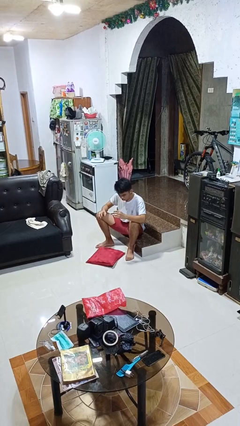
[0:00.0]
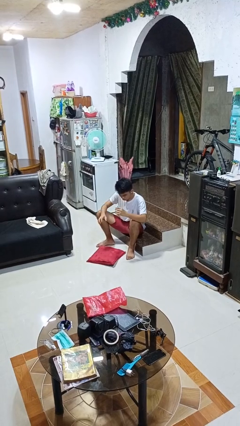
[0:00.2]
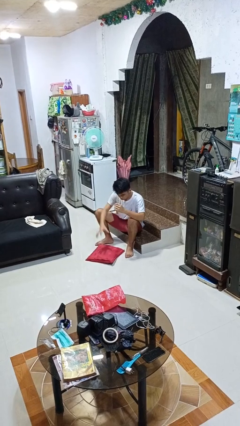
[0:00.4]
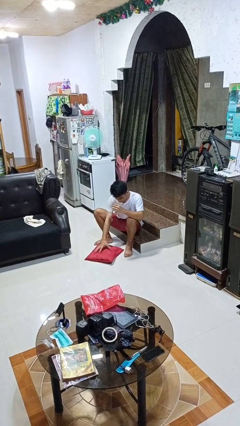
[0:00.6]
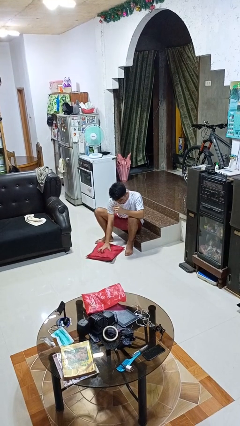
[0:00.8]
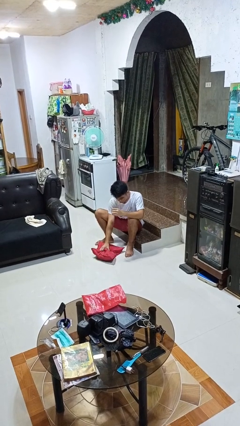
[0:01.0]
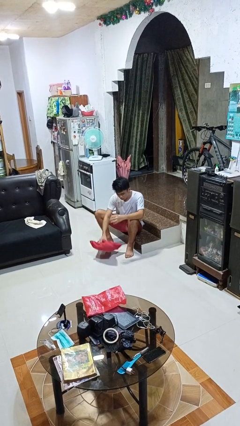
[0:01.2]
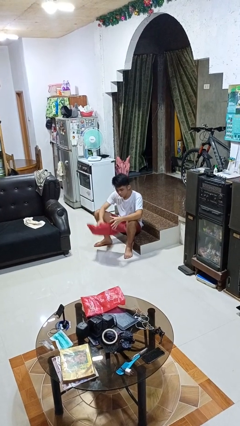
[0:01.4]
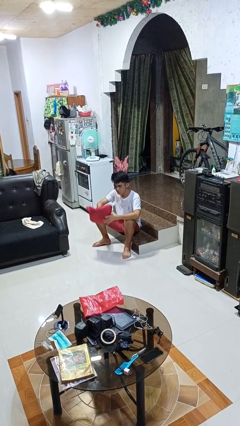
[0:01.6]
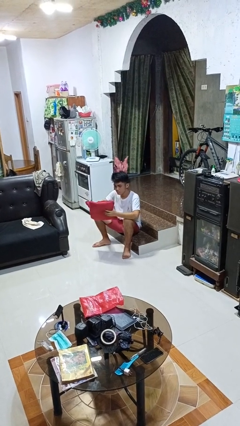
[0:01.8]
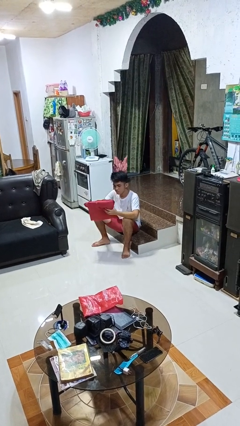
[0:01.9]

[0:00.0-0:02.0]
person picks up object from floor

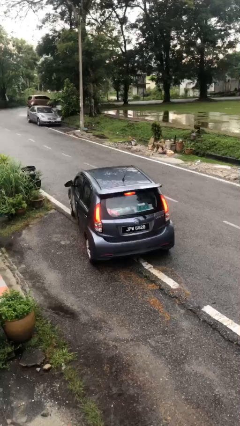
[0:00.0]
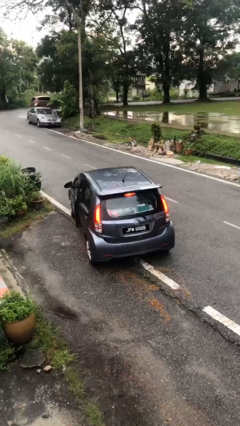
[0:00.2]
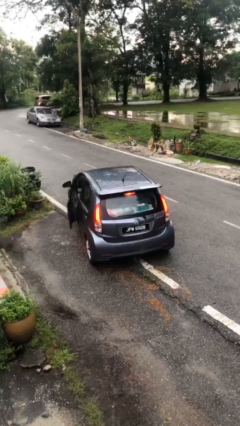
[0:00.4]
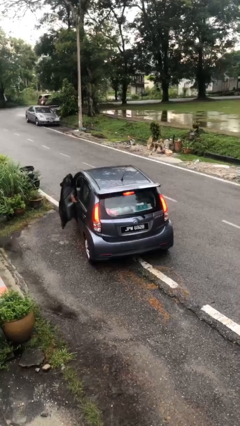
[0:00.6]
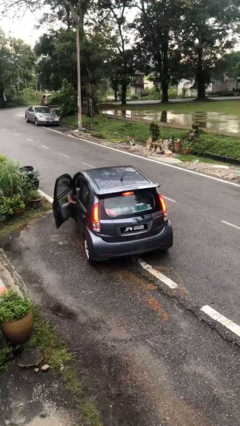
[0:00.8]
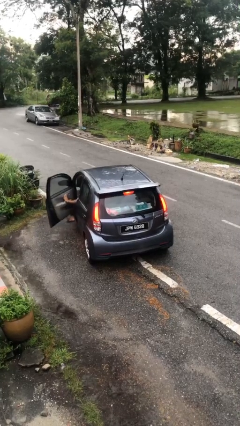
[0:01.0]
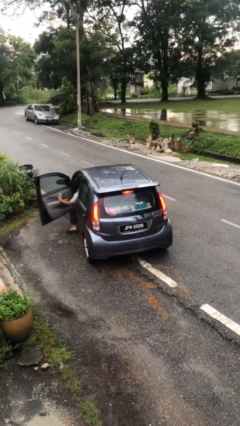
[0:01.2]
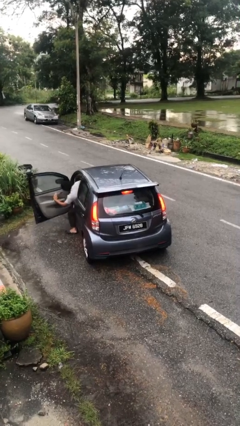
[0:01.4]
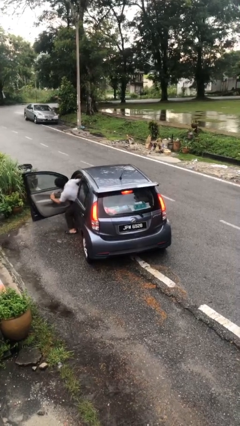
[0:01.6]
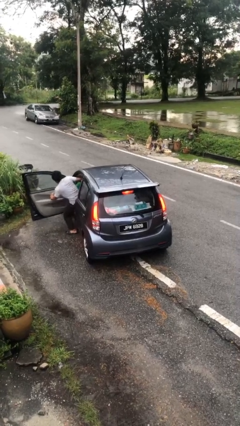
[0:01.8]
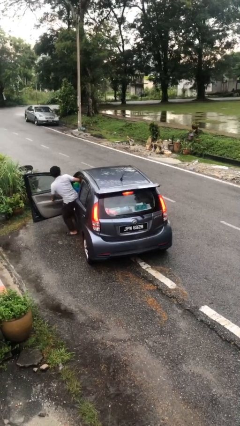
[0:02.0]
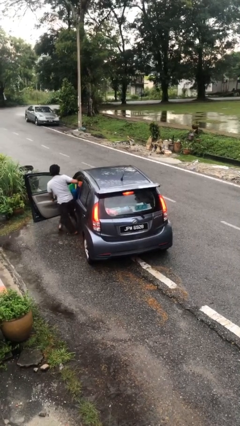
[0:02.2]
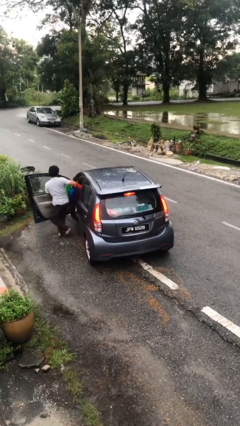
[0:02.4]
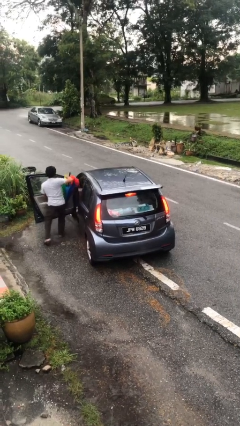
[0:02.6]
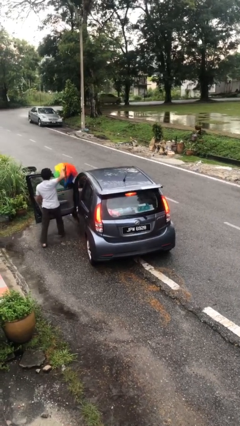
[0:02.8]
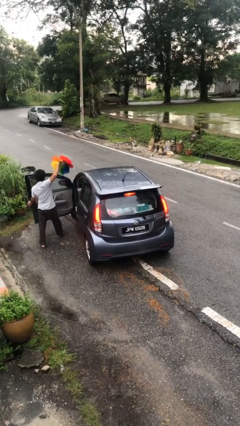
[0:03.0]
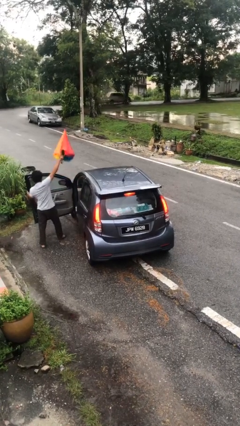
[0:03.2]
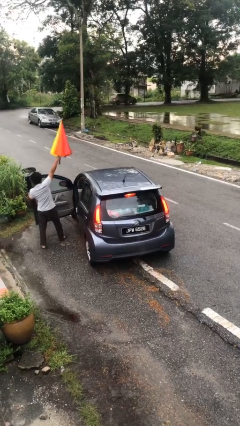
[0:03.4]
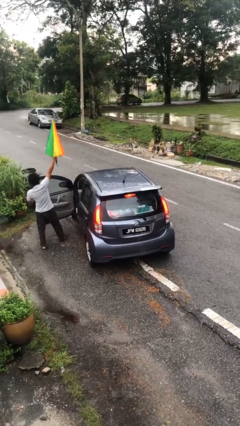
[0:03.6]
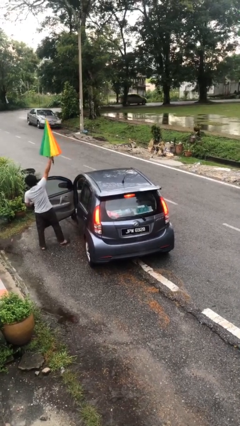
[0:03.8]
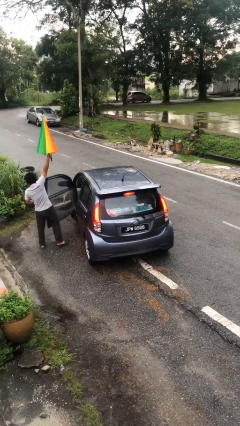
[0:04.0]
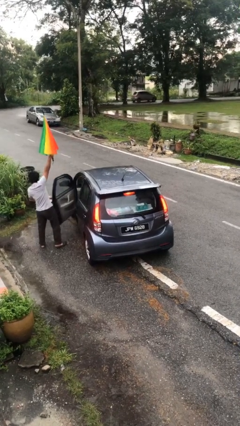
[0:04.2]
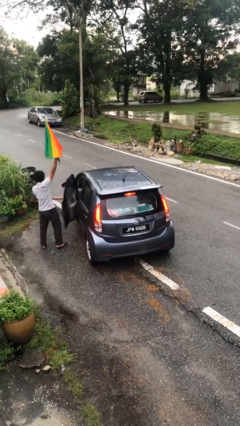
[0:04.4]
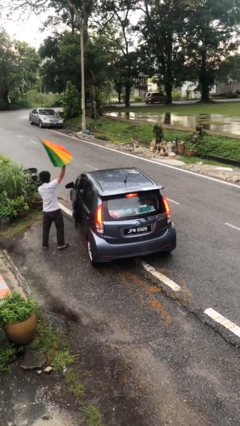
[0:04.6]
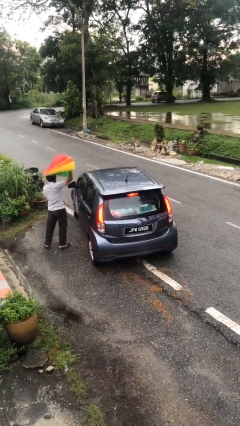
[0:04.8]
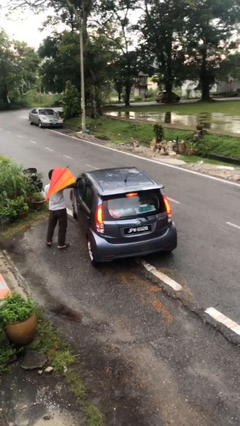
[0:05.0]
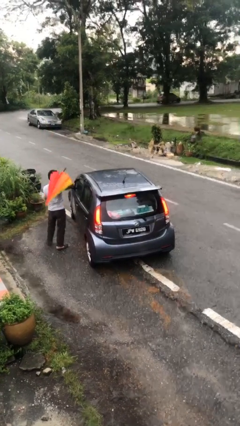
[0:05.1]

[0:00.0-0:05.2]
car drops off person

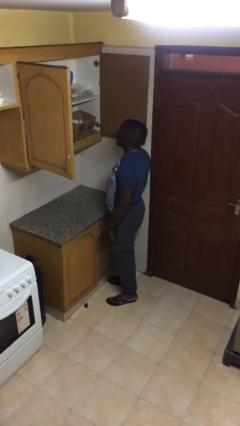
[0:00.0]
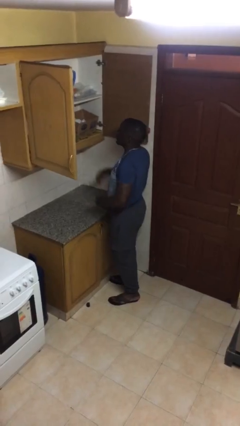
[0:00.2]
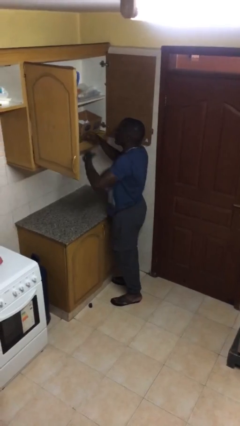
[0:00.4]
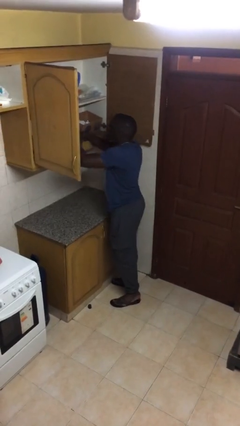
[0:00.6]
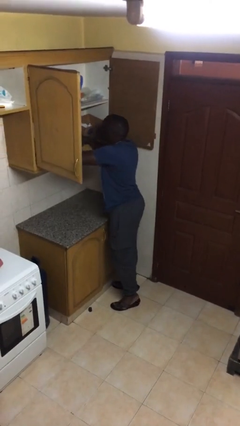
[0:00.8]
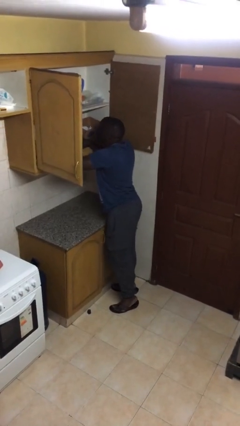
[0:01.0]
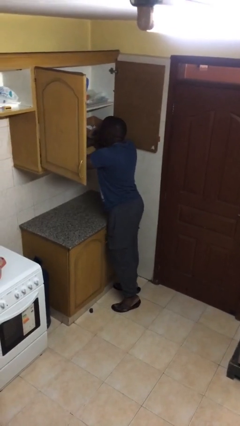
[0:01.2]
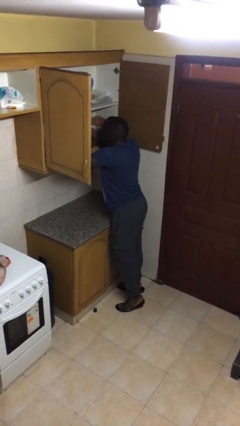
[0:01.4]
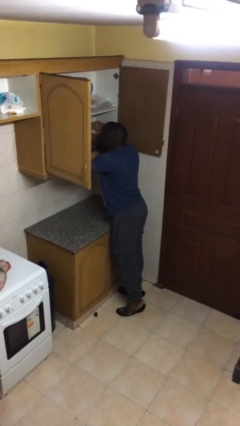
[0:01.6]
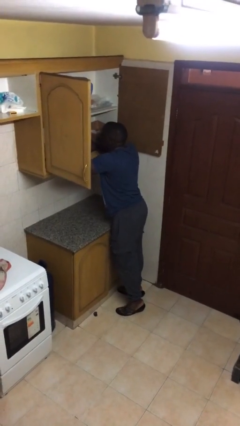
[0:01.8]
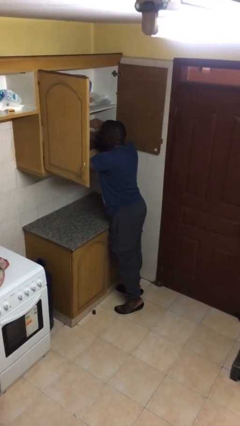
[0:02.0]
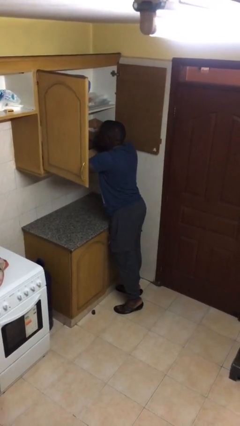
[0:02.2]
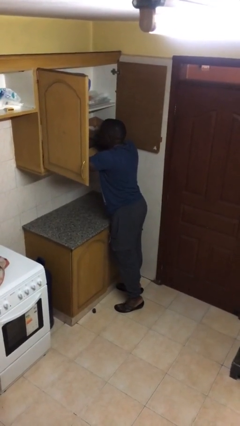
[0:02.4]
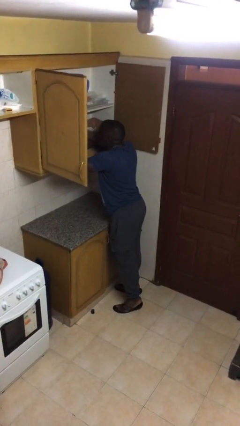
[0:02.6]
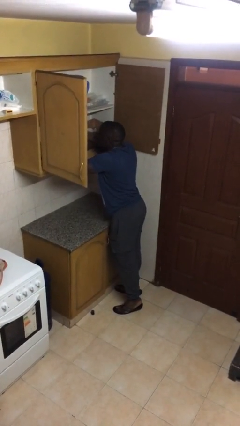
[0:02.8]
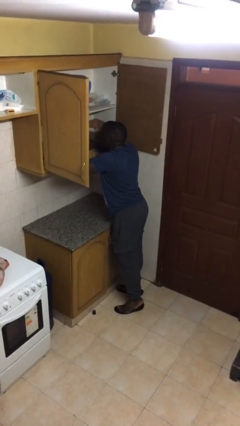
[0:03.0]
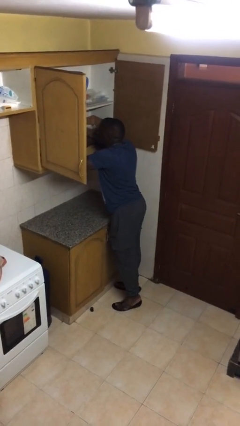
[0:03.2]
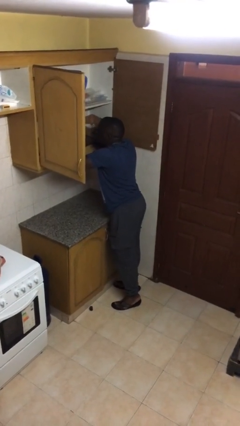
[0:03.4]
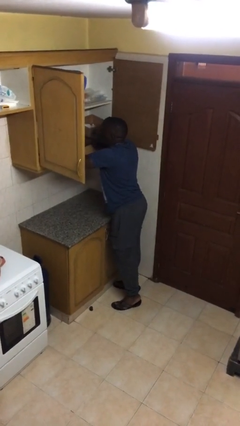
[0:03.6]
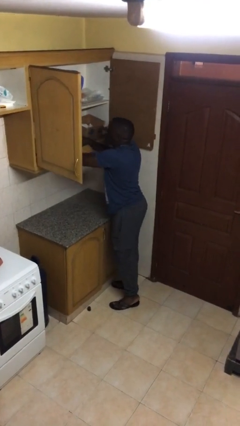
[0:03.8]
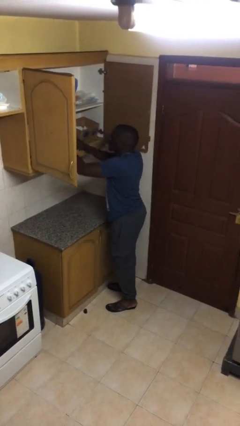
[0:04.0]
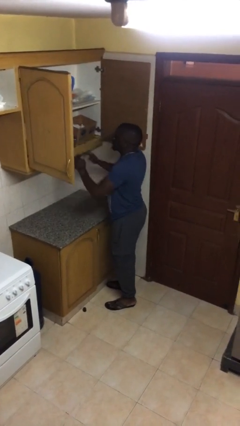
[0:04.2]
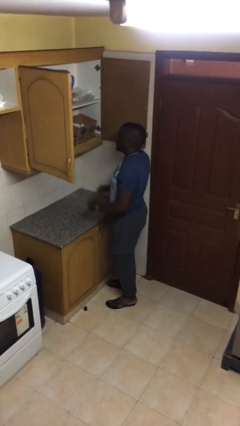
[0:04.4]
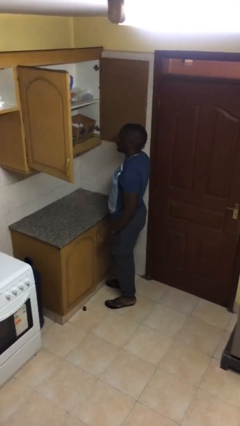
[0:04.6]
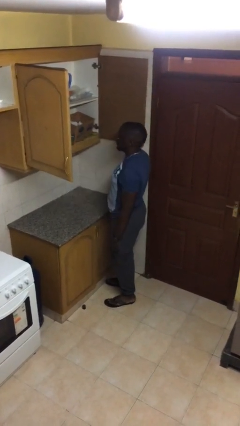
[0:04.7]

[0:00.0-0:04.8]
person searches in cabinet

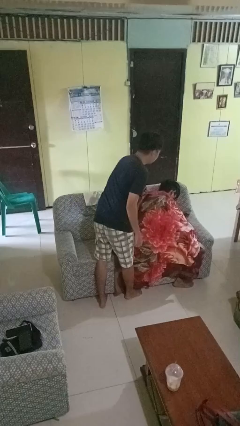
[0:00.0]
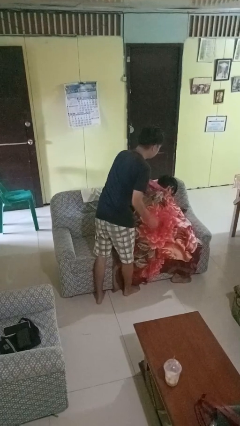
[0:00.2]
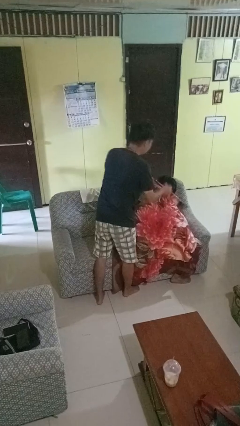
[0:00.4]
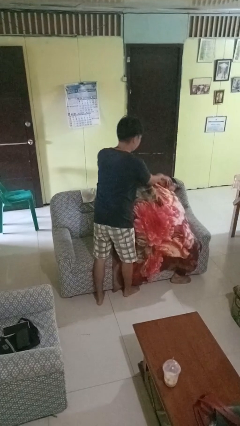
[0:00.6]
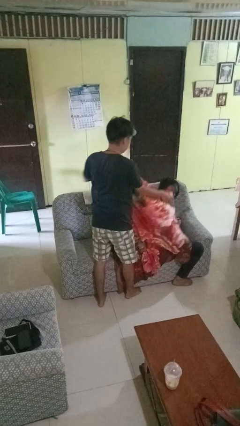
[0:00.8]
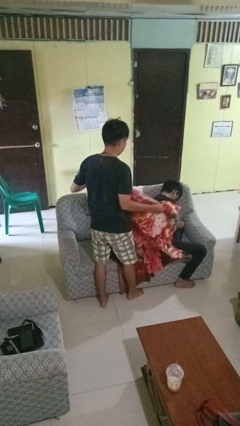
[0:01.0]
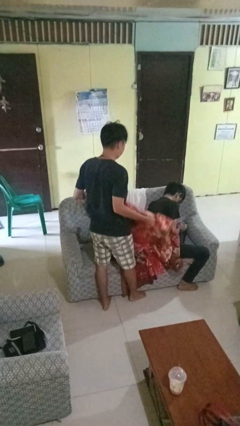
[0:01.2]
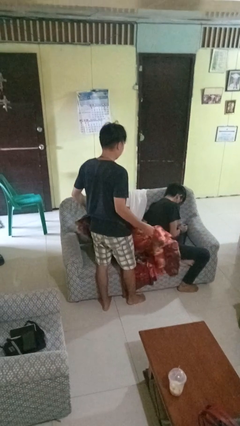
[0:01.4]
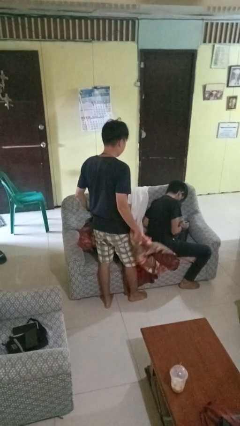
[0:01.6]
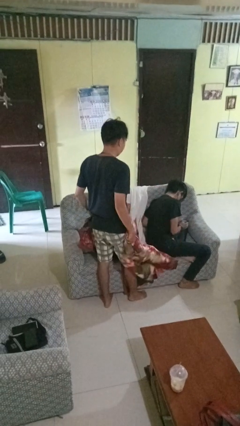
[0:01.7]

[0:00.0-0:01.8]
person uncovers friend with blanket

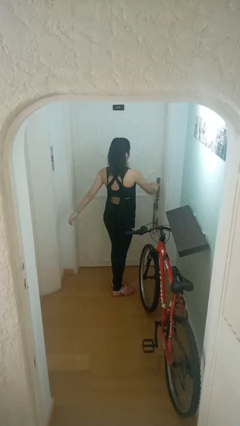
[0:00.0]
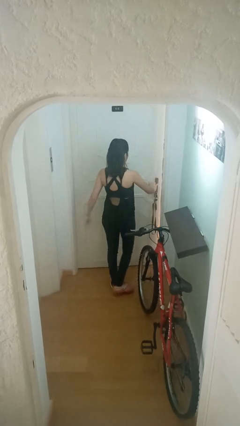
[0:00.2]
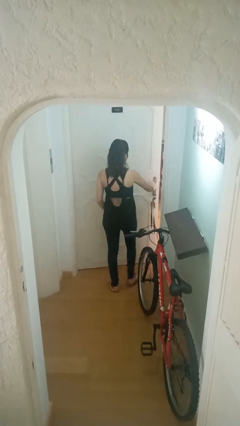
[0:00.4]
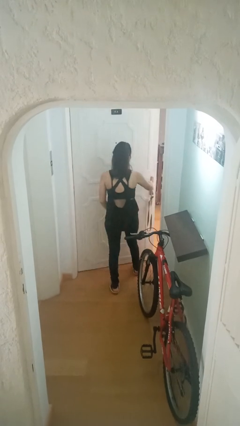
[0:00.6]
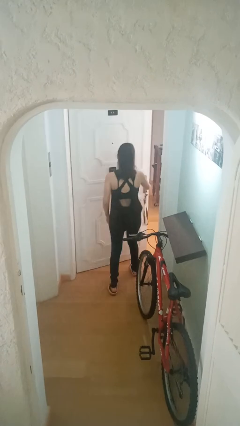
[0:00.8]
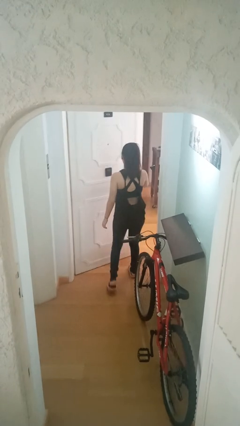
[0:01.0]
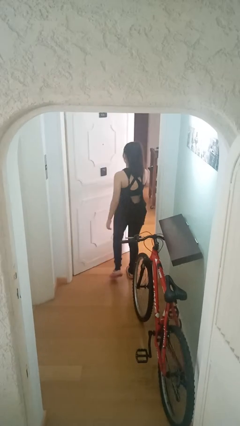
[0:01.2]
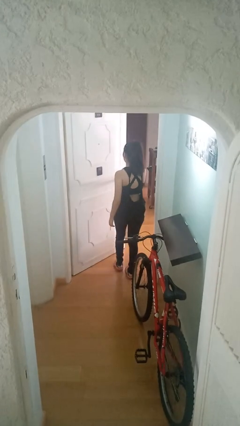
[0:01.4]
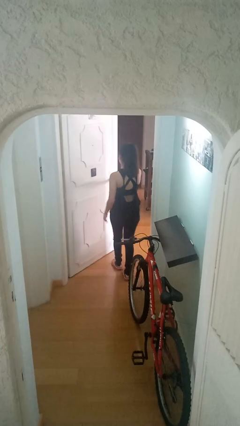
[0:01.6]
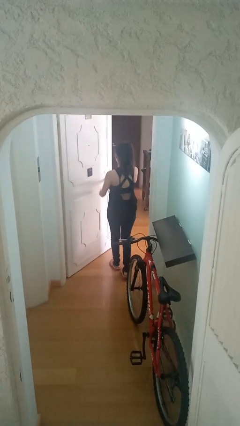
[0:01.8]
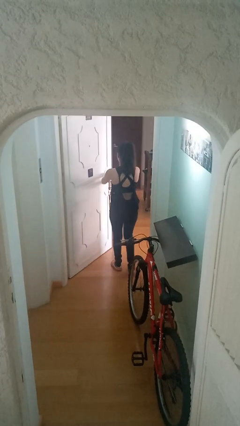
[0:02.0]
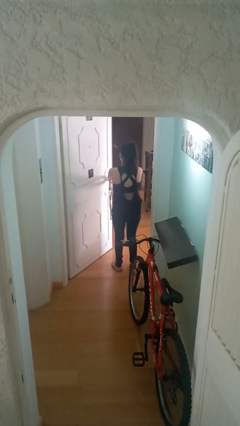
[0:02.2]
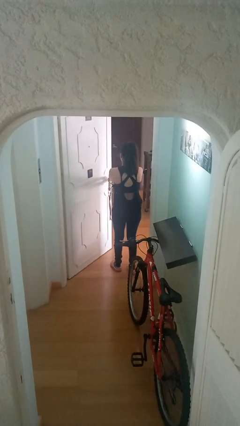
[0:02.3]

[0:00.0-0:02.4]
person opens facility door

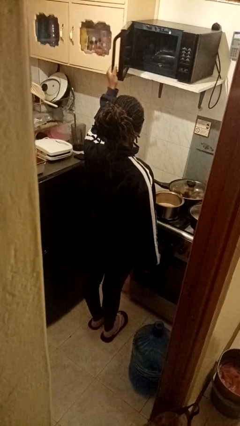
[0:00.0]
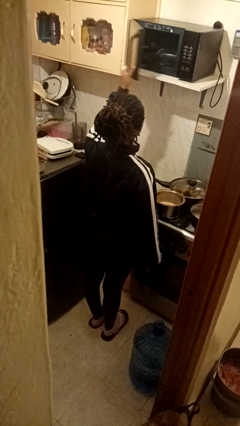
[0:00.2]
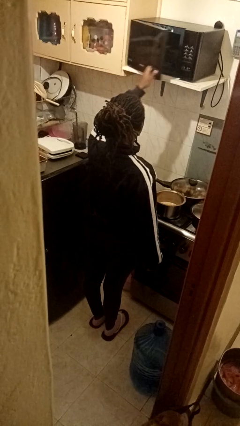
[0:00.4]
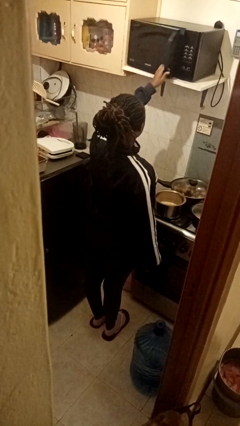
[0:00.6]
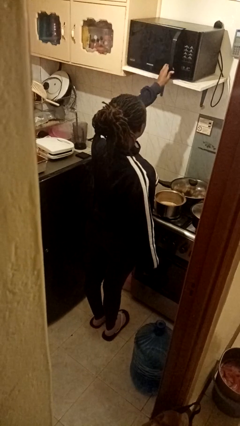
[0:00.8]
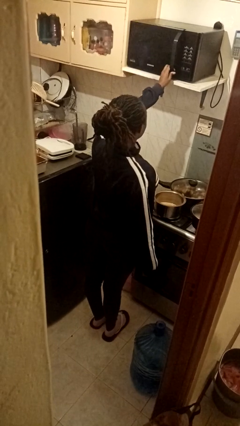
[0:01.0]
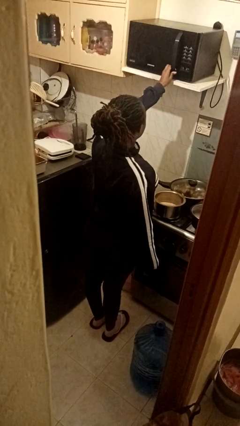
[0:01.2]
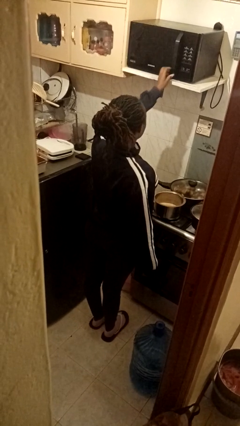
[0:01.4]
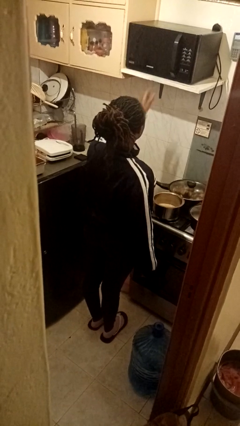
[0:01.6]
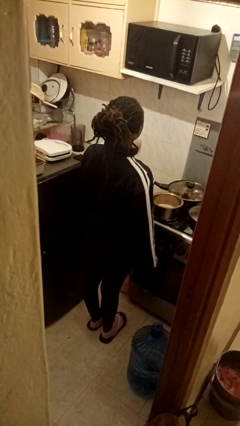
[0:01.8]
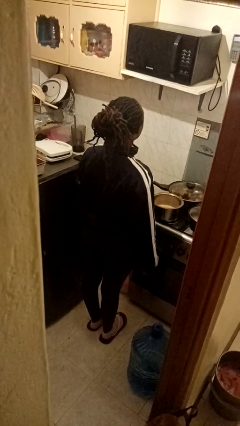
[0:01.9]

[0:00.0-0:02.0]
person closes microwave
